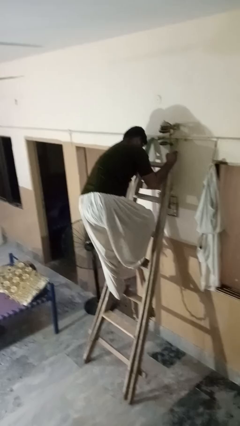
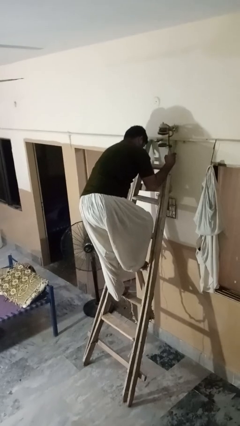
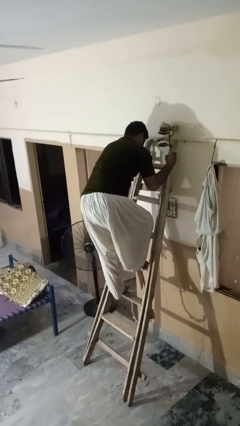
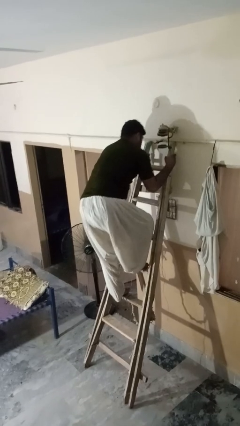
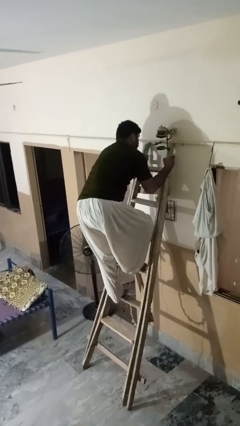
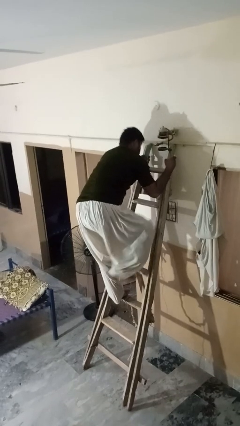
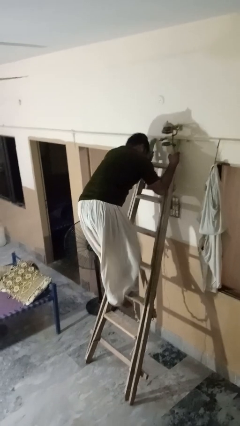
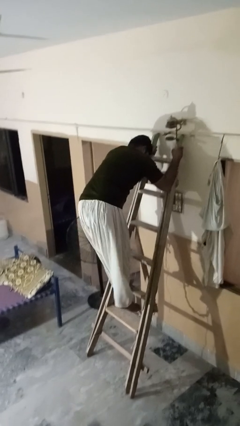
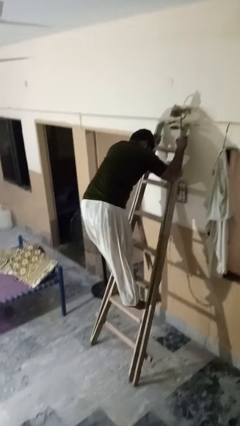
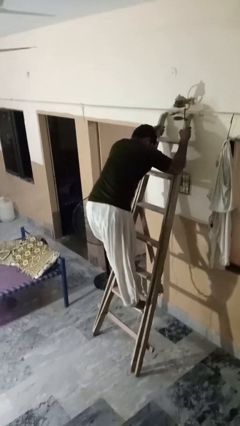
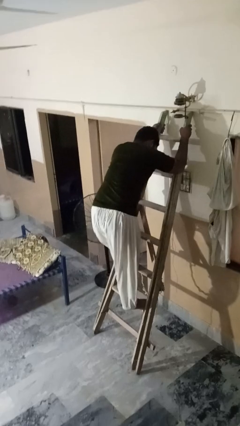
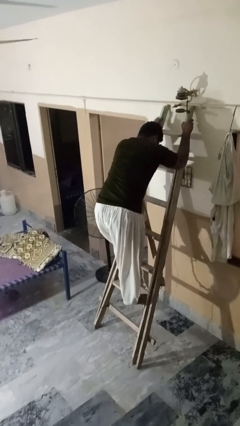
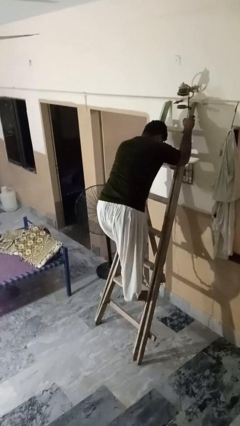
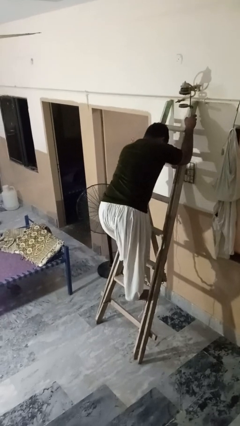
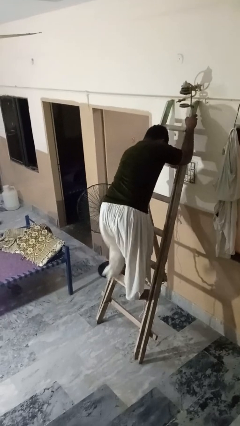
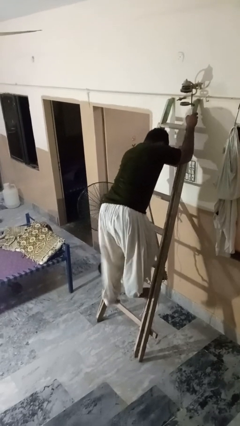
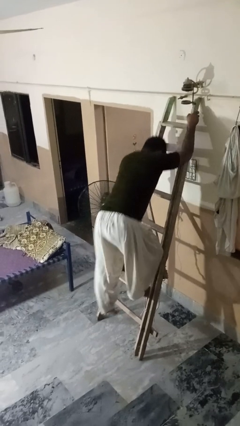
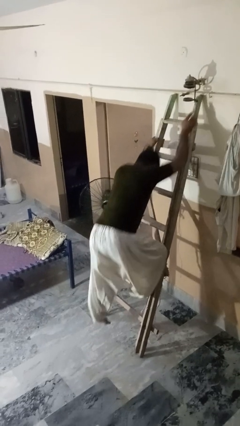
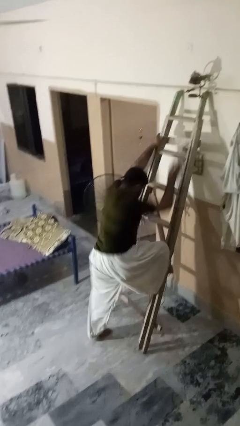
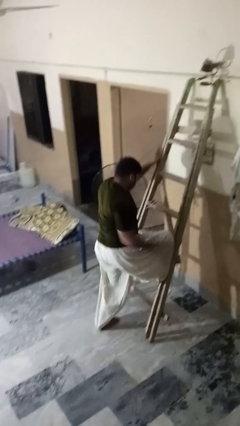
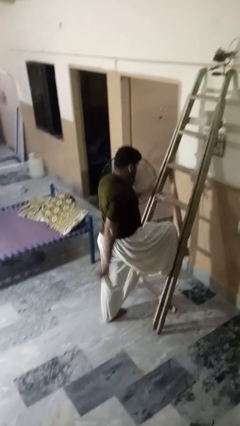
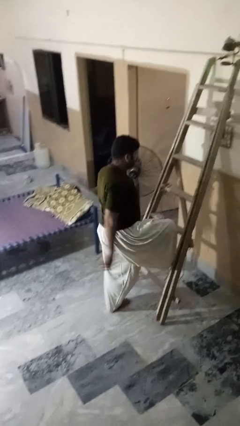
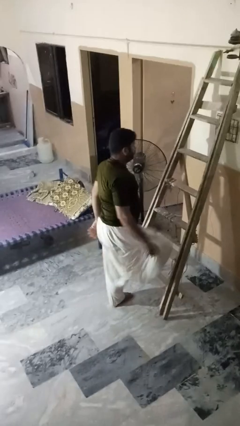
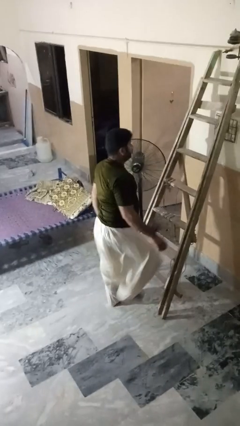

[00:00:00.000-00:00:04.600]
person climbs down ladder

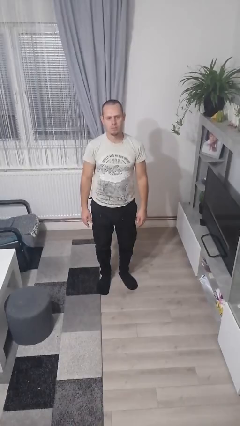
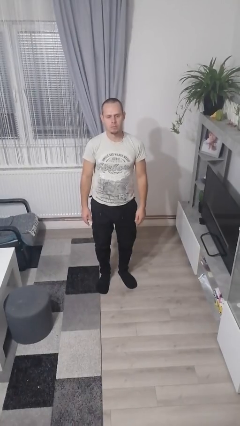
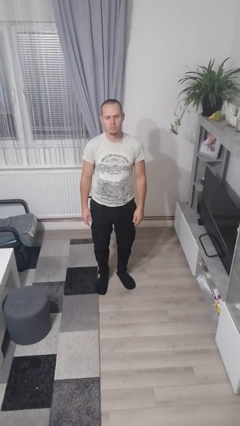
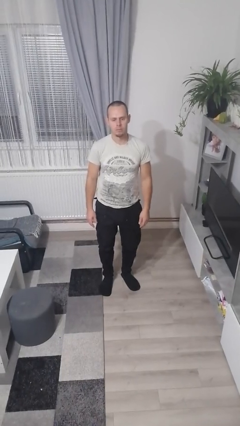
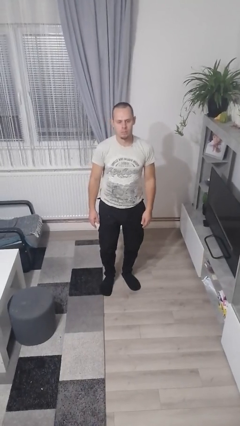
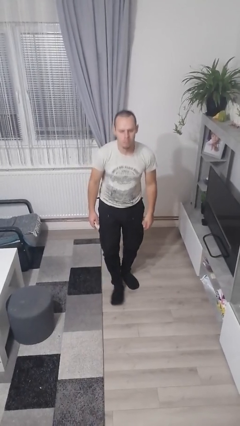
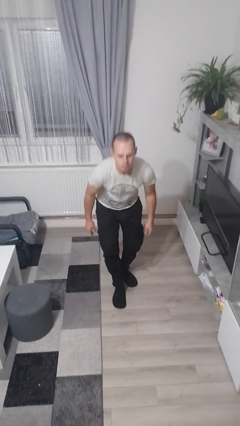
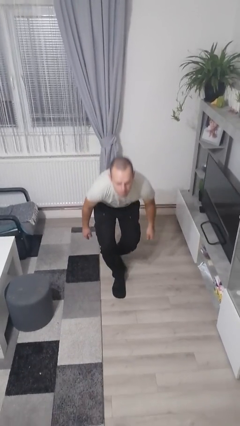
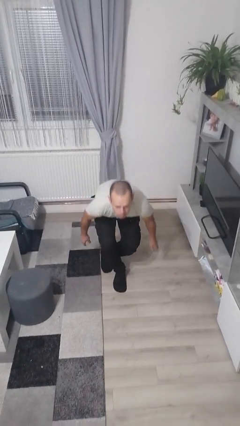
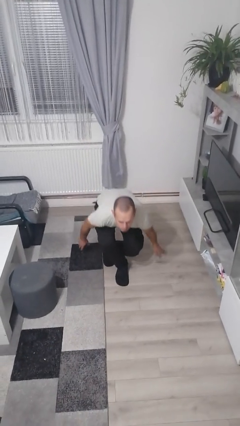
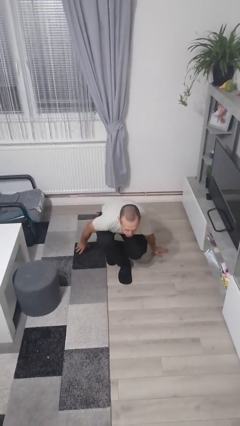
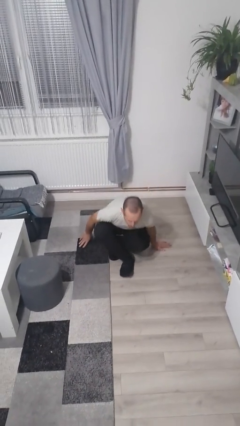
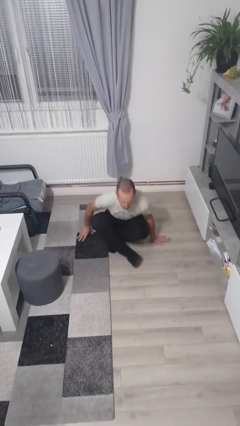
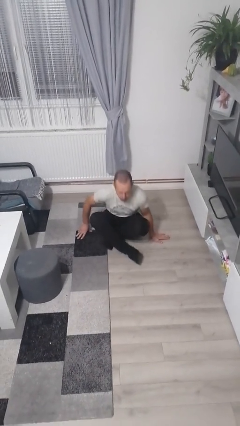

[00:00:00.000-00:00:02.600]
person sits crisscross

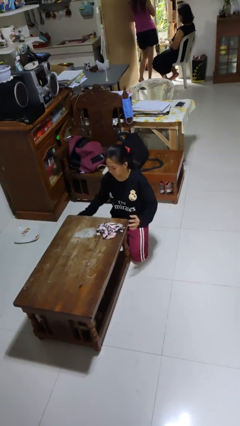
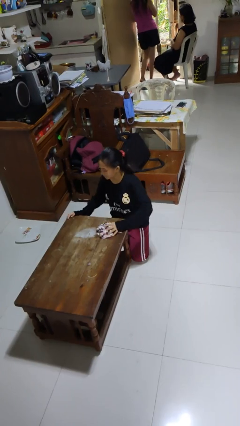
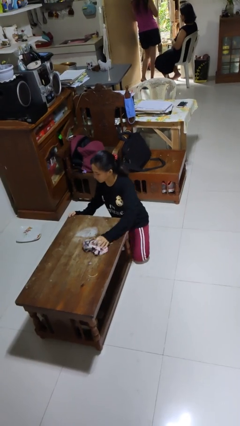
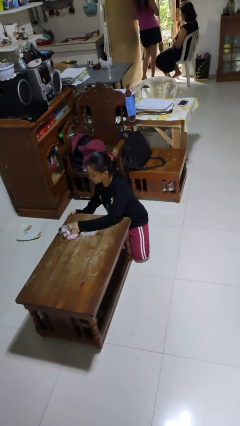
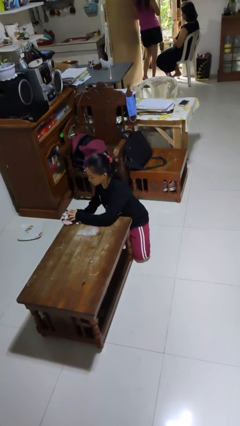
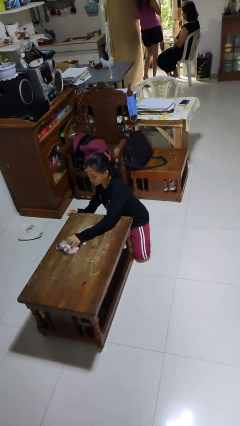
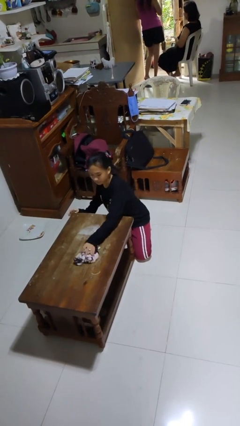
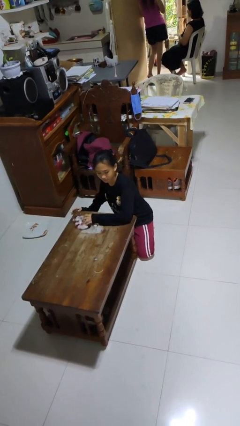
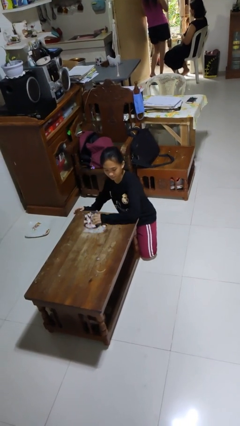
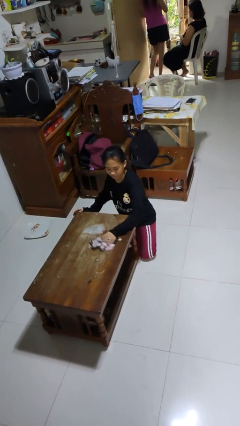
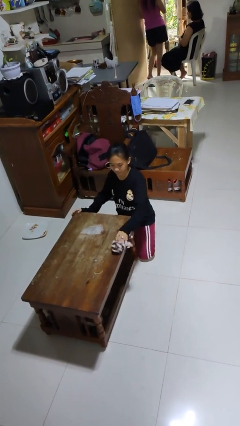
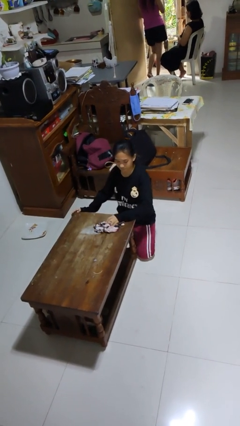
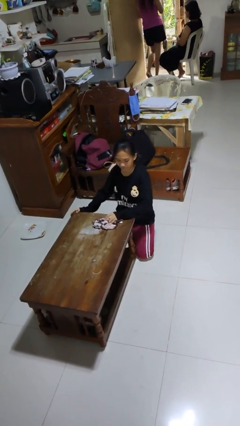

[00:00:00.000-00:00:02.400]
person cleans table with rag

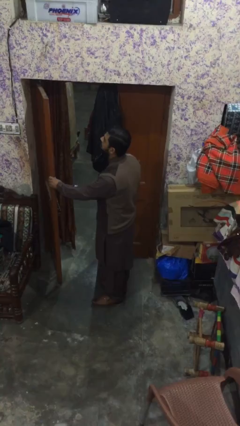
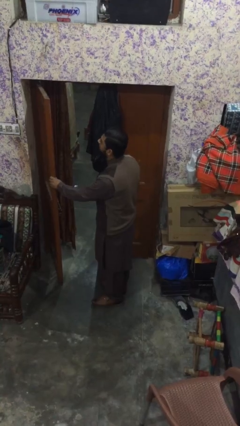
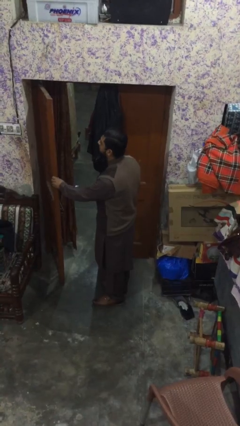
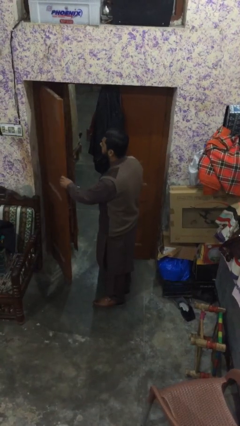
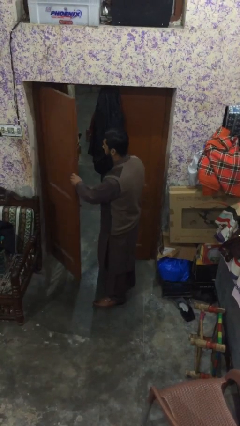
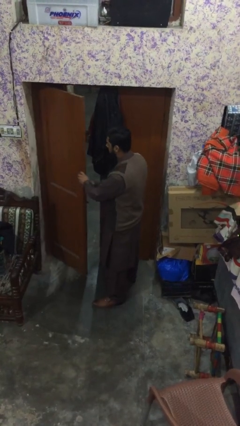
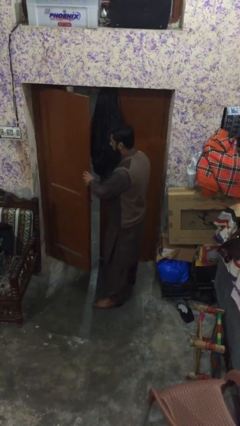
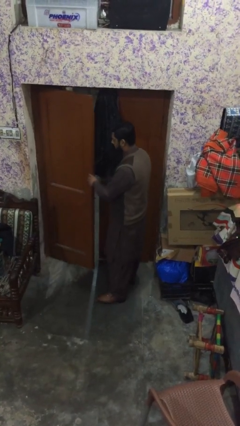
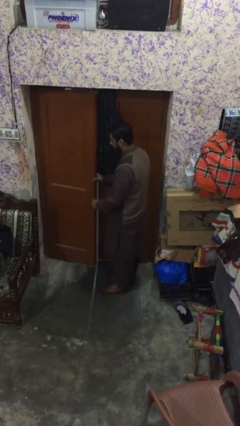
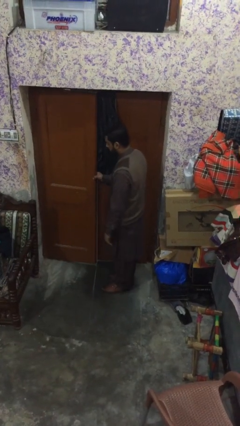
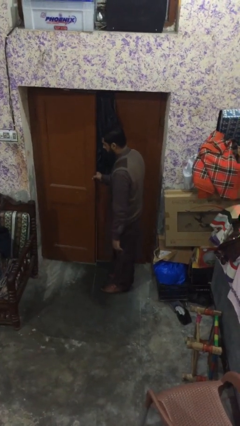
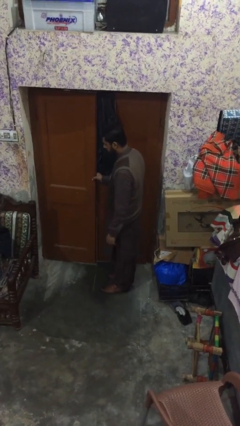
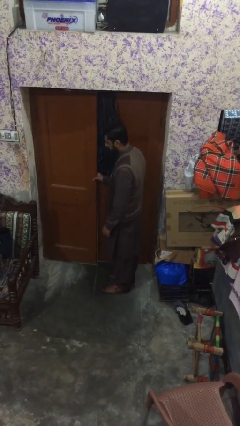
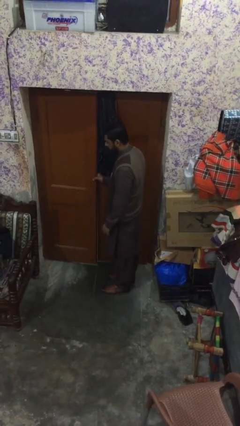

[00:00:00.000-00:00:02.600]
person closes facility door

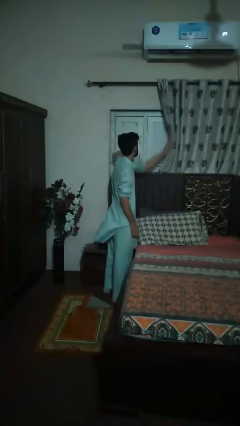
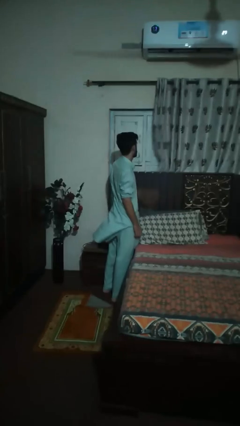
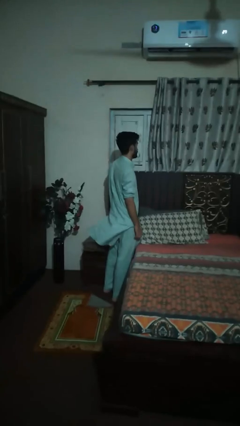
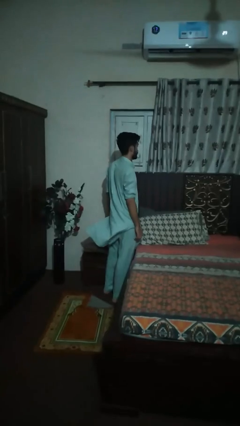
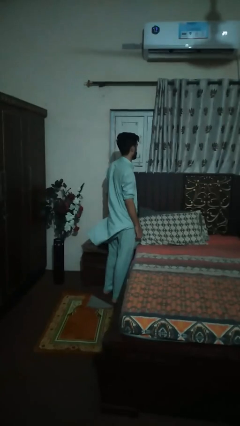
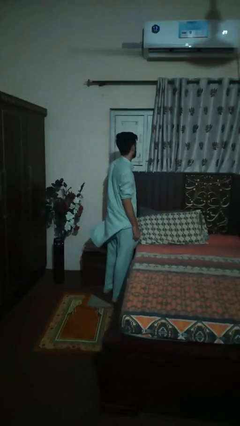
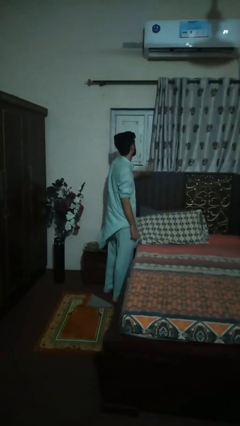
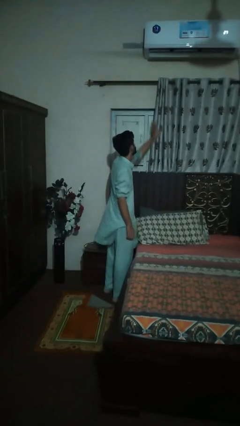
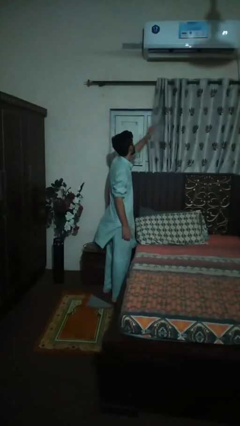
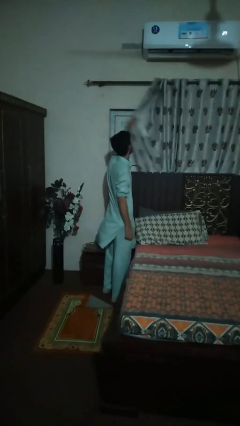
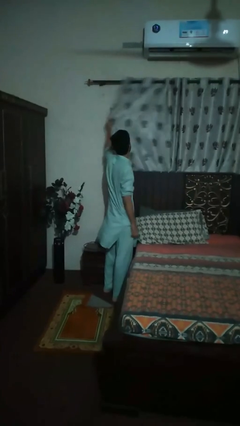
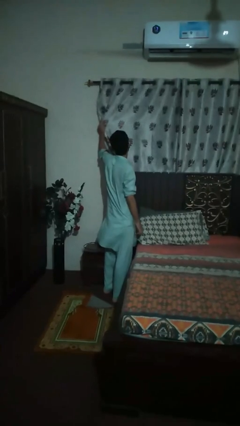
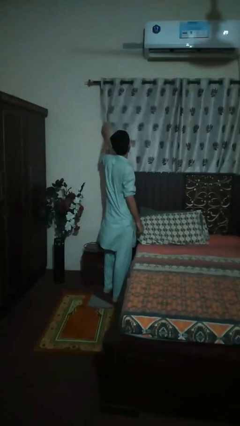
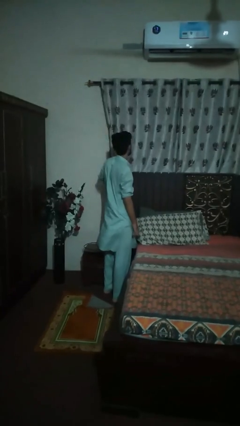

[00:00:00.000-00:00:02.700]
person closes curtains

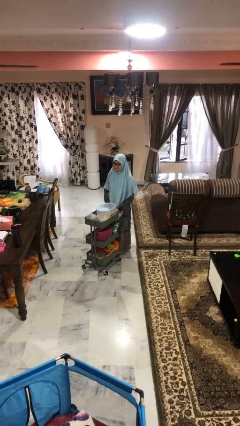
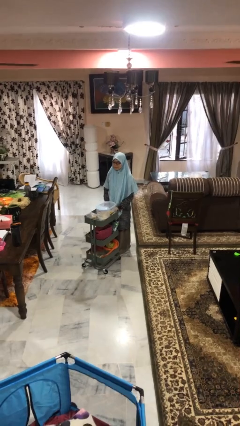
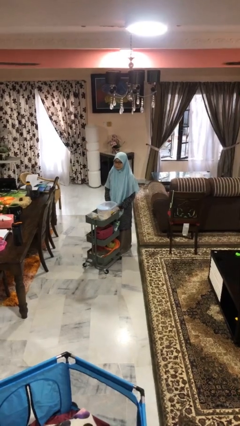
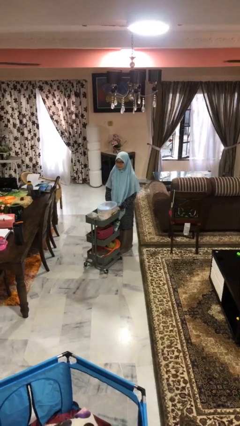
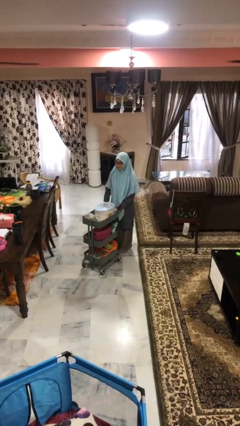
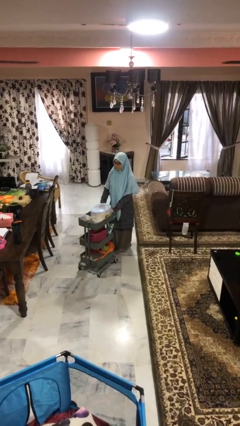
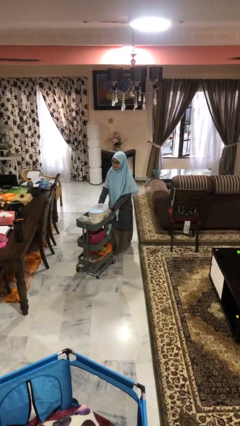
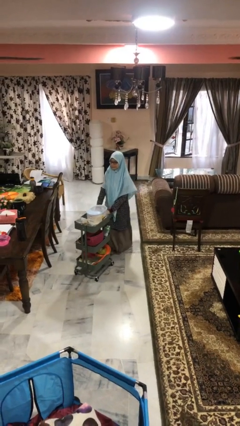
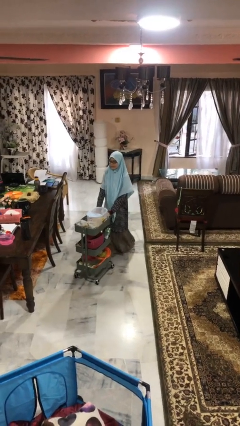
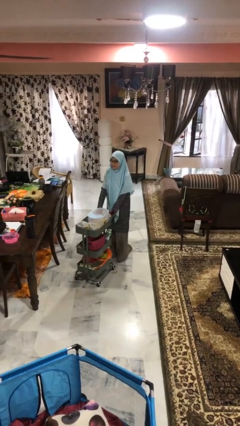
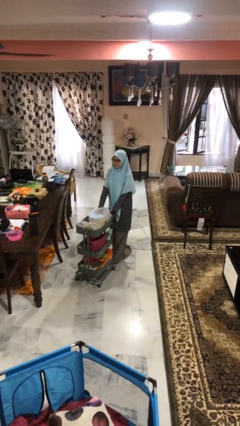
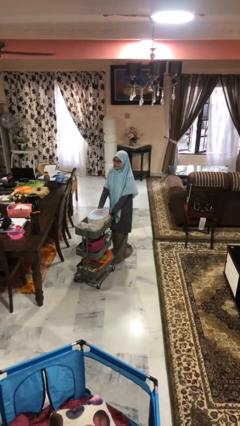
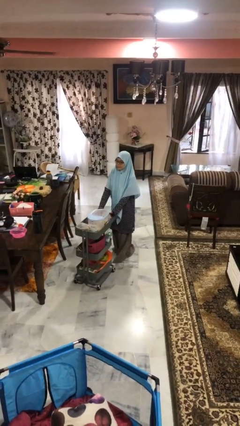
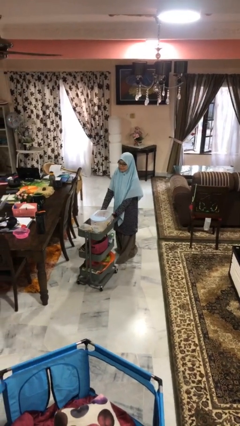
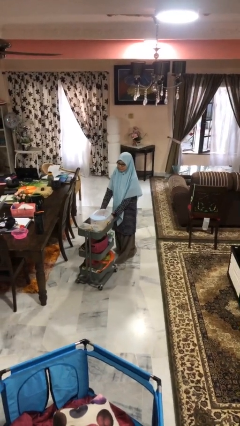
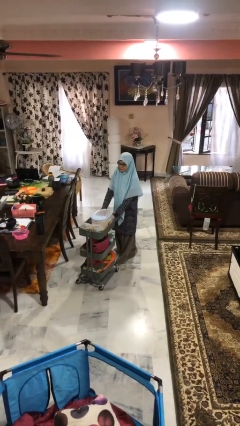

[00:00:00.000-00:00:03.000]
person pushes wheeled cart
